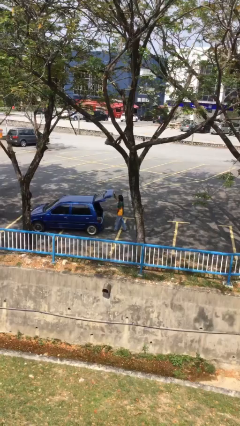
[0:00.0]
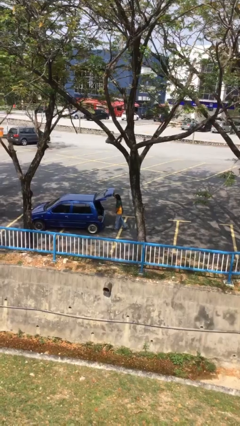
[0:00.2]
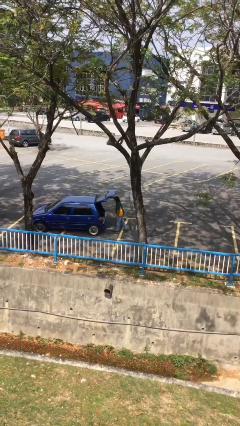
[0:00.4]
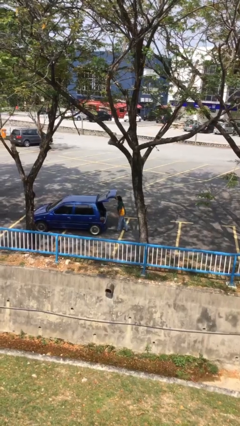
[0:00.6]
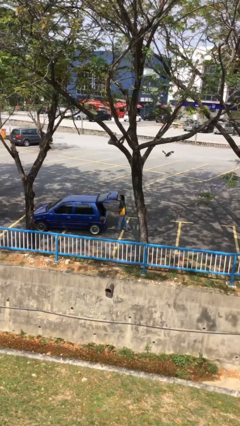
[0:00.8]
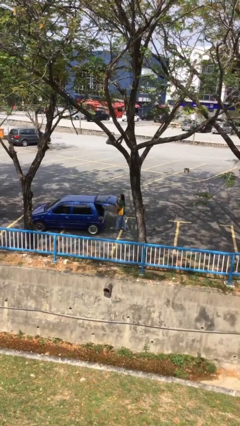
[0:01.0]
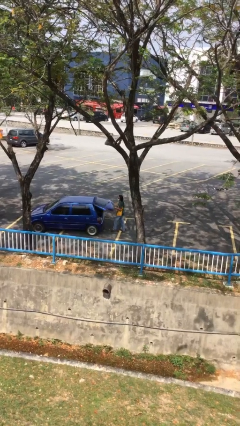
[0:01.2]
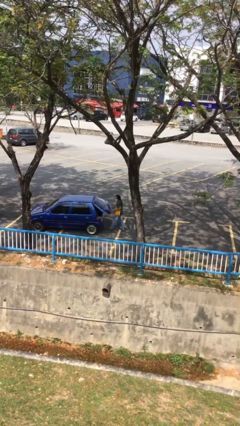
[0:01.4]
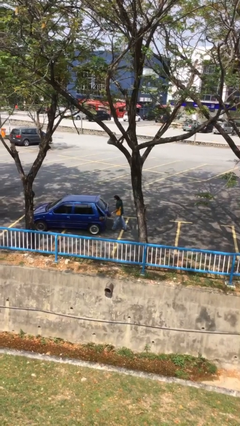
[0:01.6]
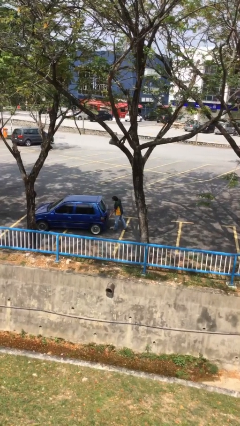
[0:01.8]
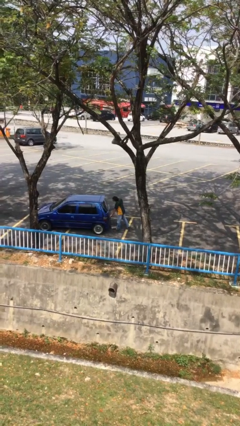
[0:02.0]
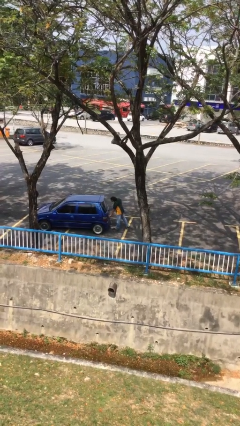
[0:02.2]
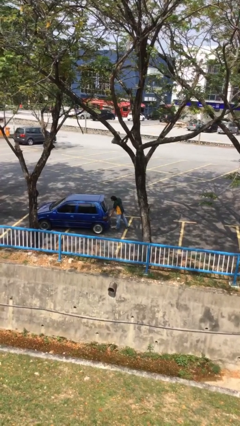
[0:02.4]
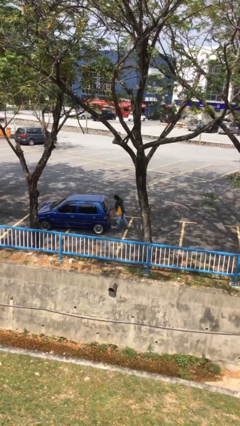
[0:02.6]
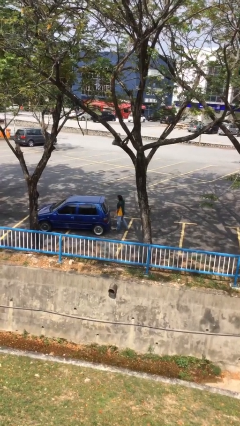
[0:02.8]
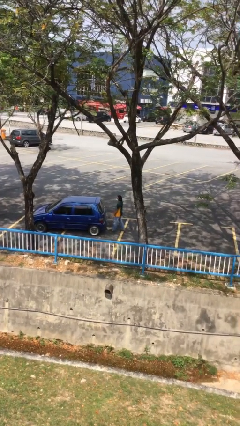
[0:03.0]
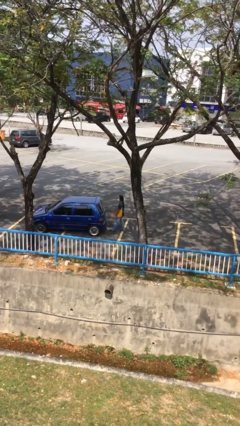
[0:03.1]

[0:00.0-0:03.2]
person closes car trunk

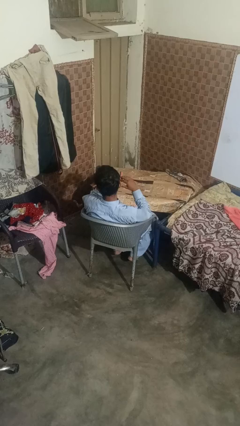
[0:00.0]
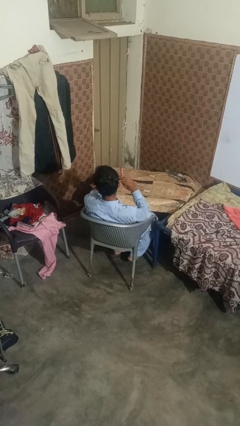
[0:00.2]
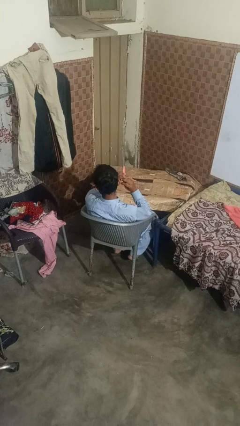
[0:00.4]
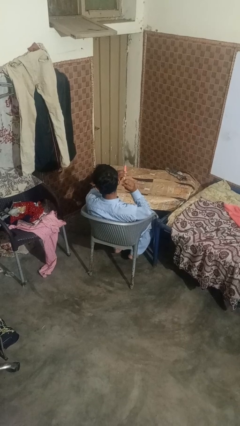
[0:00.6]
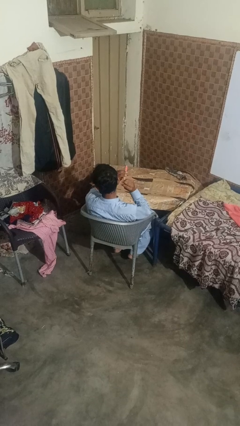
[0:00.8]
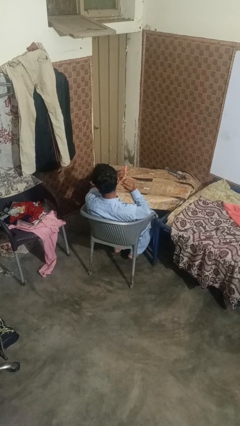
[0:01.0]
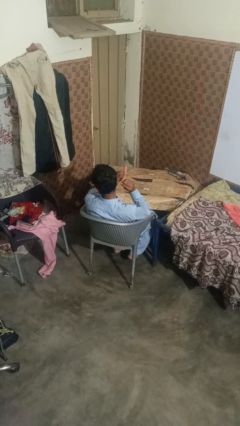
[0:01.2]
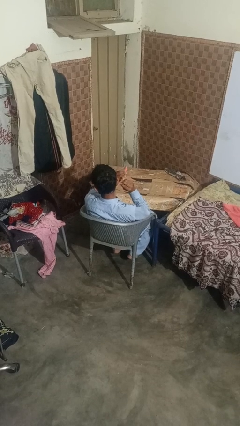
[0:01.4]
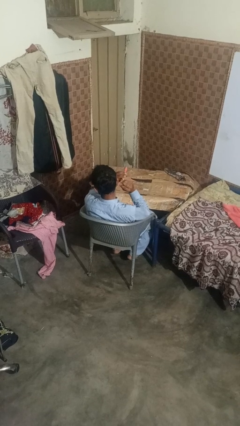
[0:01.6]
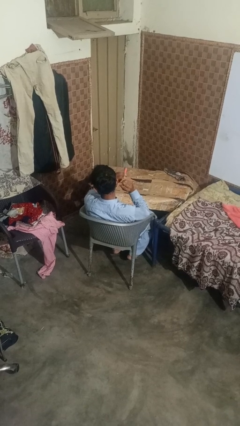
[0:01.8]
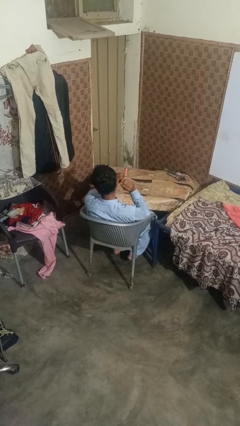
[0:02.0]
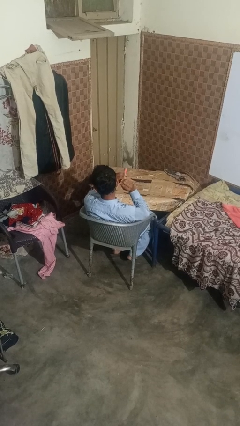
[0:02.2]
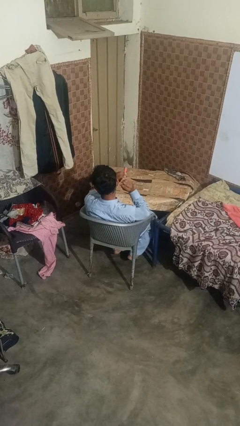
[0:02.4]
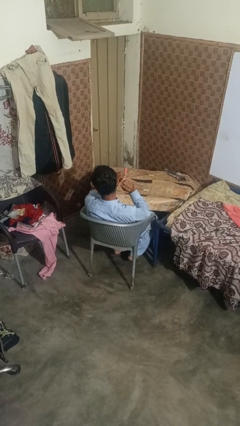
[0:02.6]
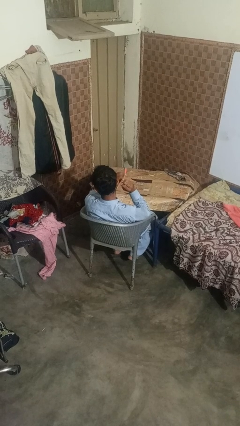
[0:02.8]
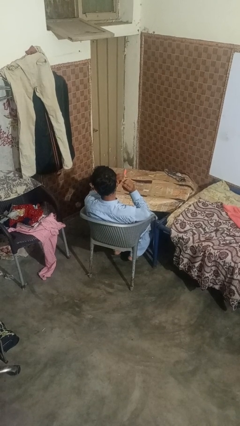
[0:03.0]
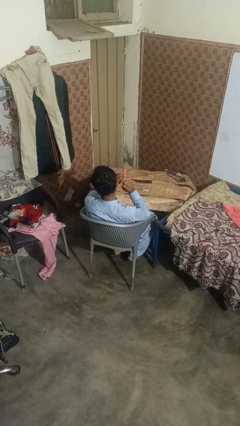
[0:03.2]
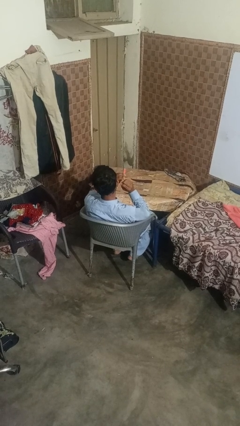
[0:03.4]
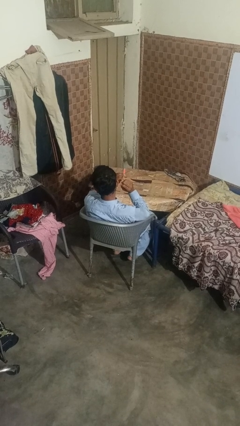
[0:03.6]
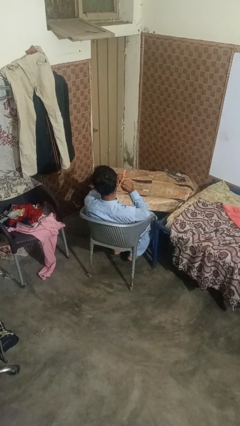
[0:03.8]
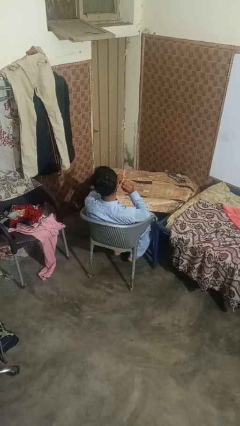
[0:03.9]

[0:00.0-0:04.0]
person files fingernails

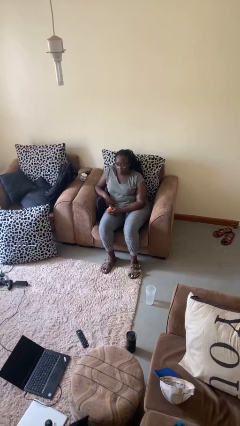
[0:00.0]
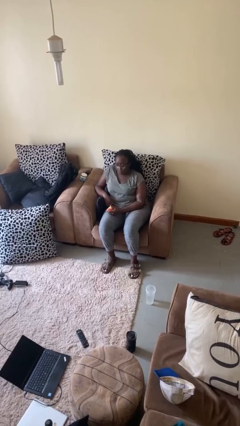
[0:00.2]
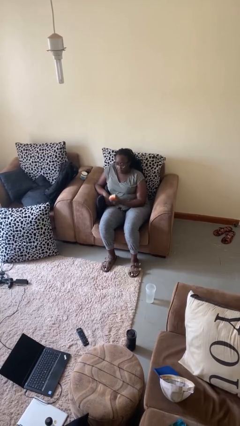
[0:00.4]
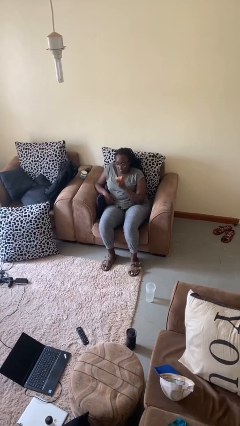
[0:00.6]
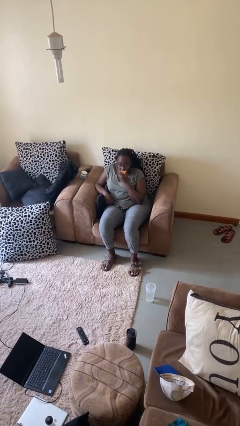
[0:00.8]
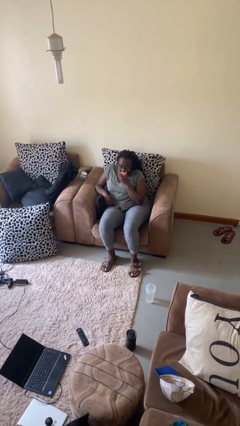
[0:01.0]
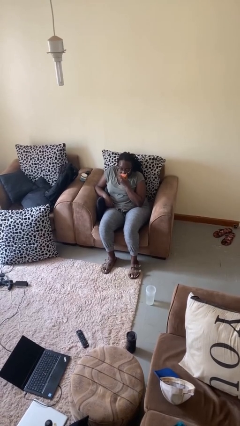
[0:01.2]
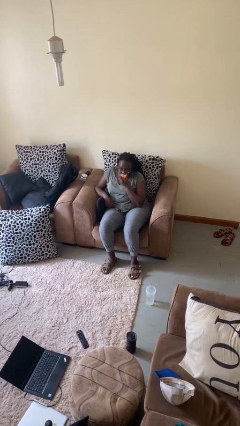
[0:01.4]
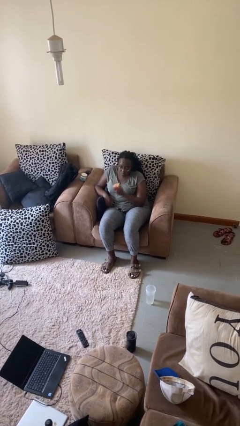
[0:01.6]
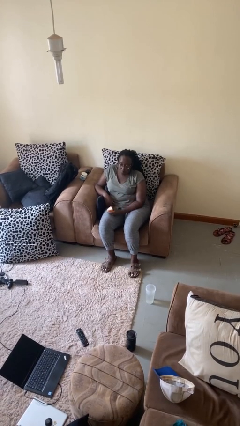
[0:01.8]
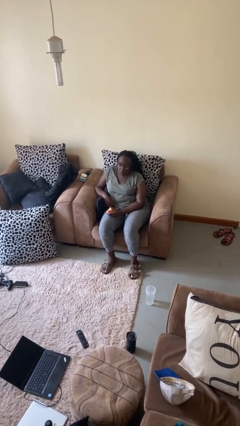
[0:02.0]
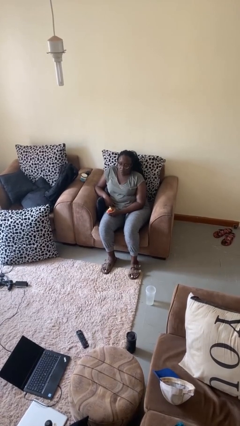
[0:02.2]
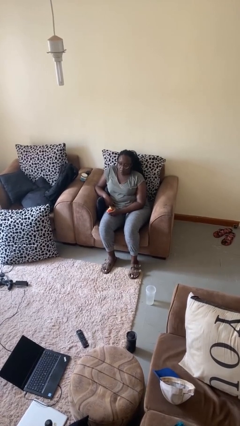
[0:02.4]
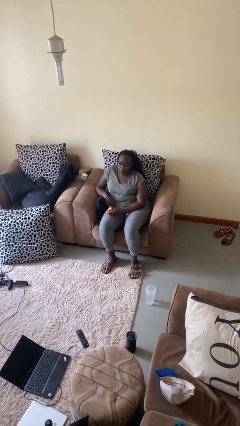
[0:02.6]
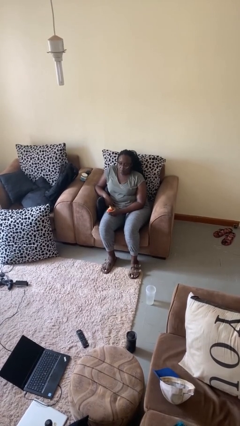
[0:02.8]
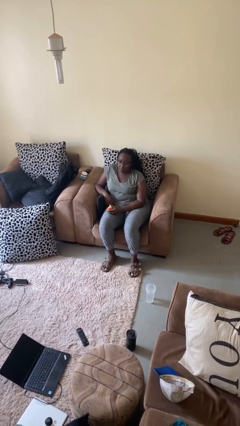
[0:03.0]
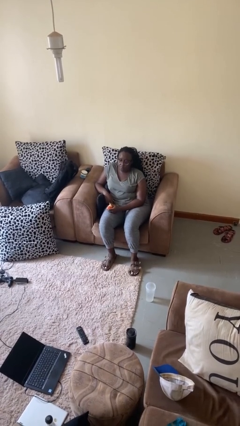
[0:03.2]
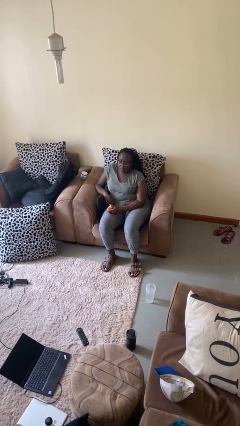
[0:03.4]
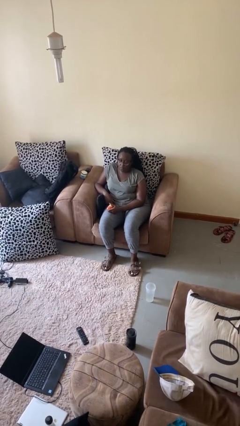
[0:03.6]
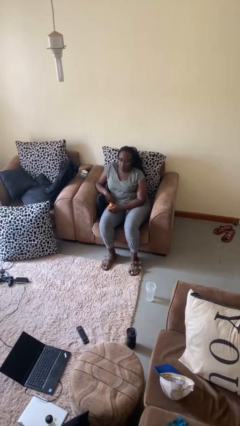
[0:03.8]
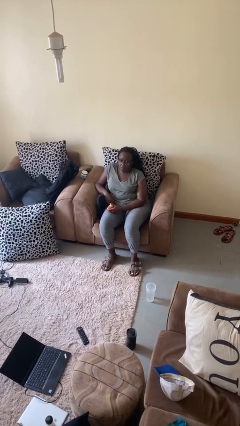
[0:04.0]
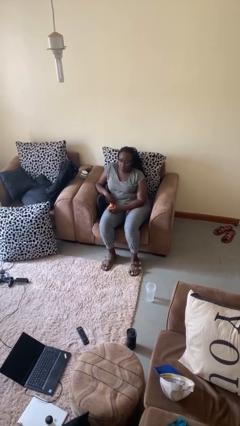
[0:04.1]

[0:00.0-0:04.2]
person eats apple

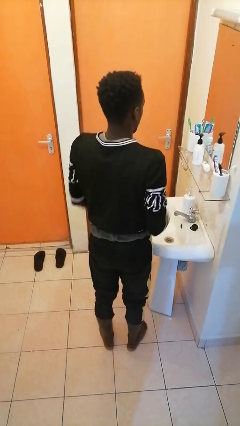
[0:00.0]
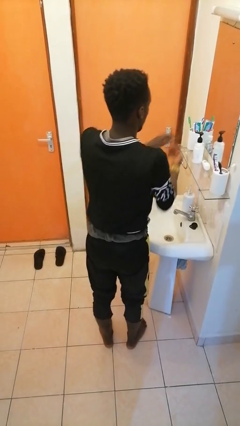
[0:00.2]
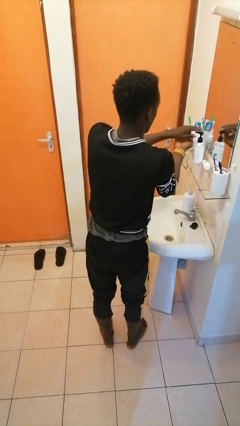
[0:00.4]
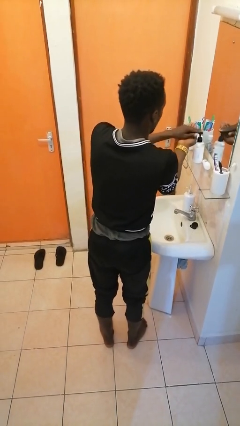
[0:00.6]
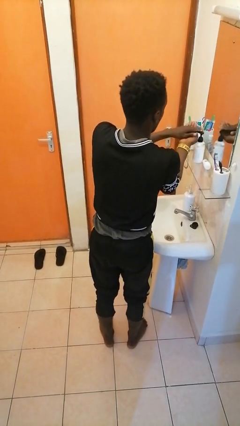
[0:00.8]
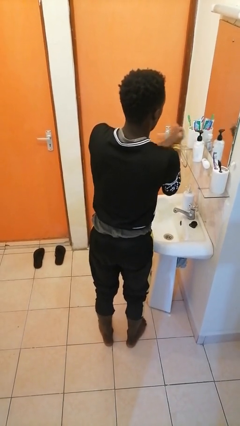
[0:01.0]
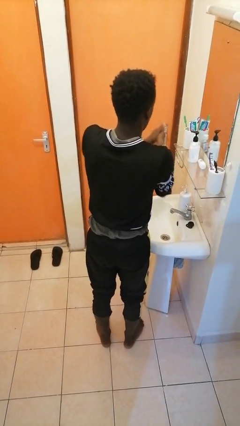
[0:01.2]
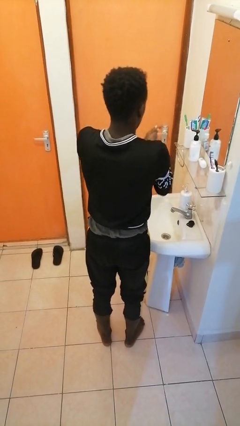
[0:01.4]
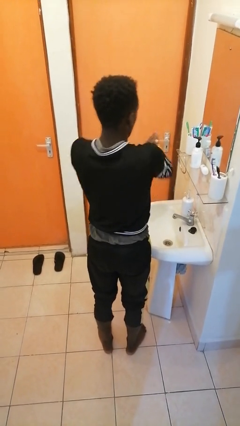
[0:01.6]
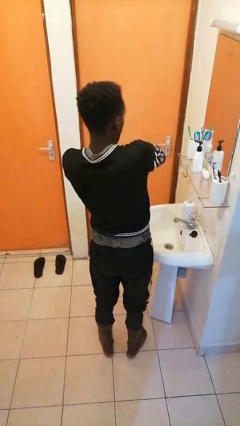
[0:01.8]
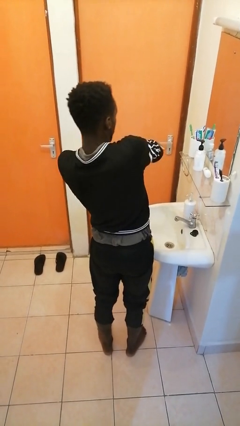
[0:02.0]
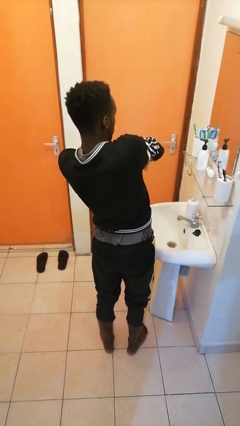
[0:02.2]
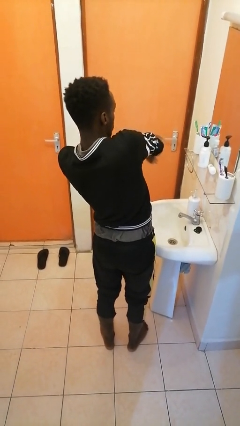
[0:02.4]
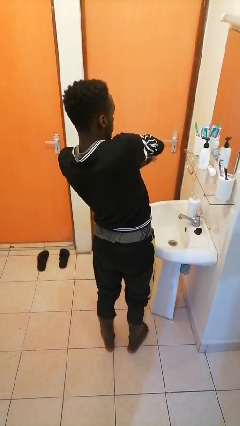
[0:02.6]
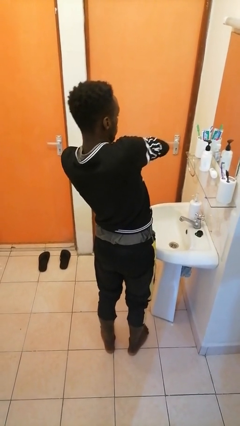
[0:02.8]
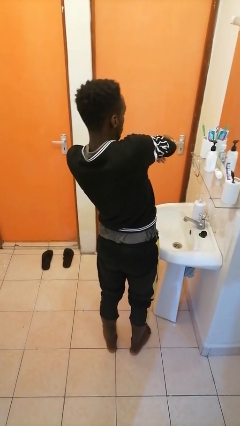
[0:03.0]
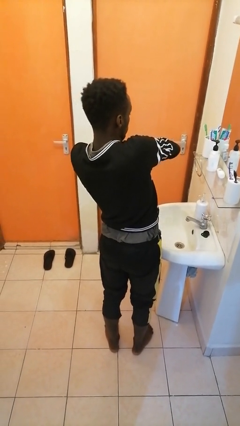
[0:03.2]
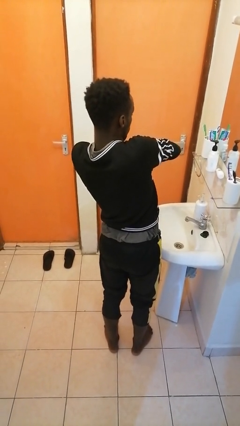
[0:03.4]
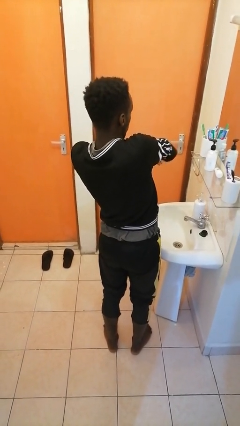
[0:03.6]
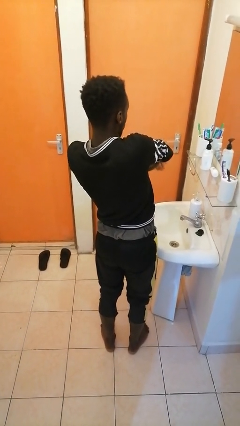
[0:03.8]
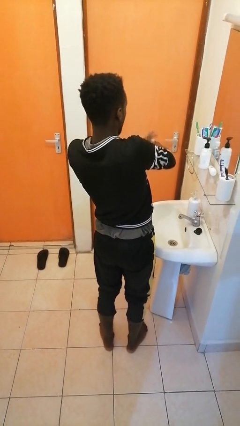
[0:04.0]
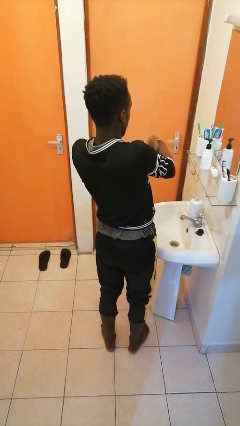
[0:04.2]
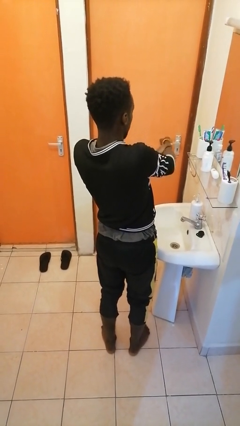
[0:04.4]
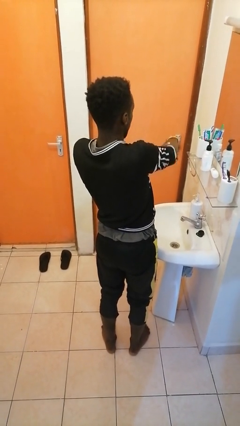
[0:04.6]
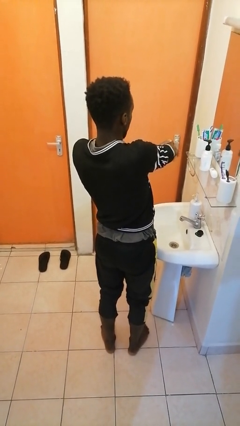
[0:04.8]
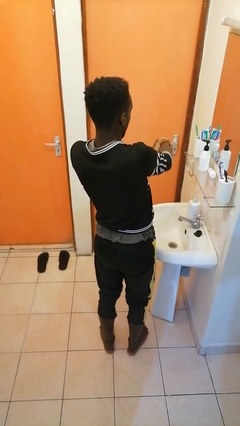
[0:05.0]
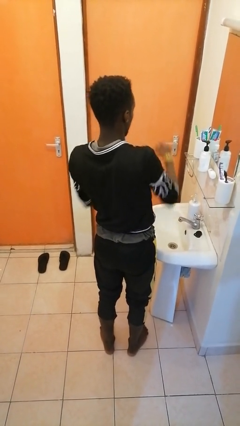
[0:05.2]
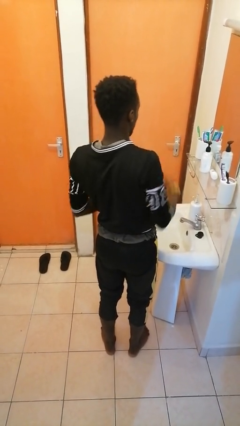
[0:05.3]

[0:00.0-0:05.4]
person applies facial moisturizer

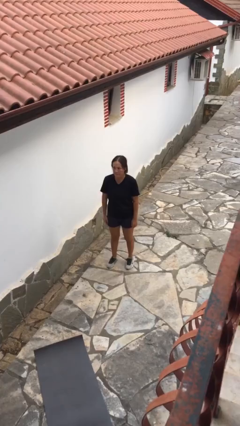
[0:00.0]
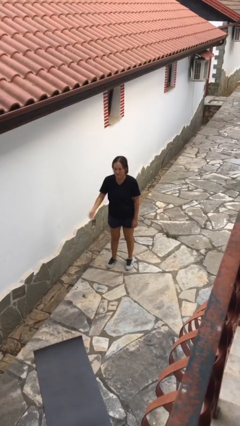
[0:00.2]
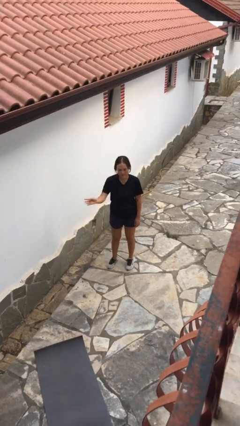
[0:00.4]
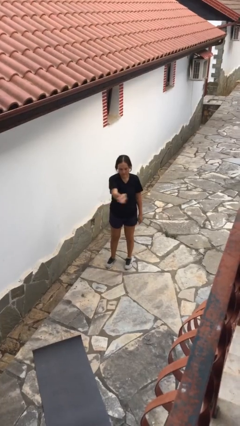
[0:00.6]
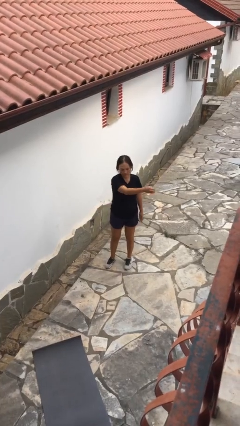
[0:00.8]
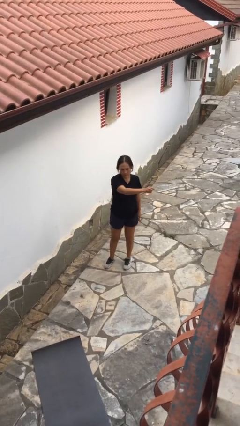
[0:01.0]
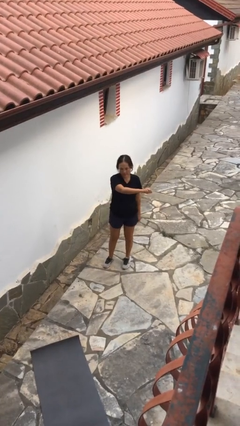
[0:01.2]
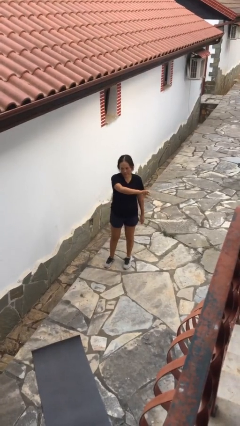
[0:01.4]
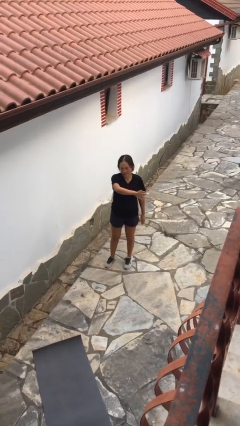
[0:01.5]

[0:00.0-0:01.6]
person gestures swipe left
